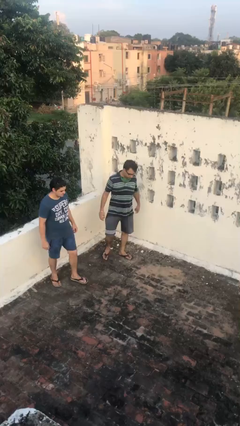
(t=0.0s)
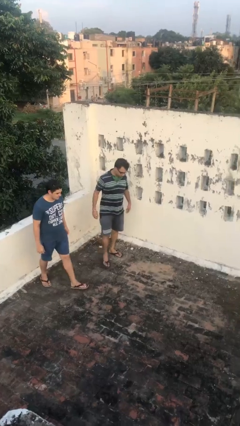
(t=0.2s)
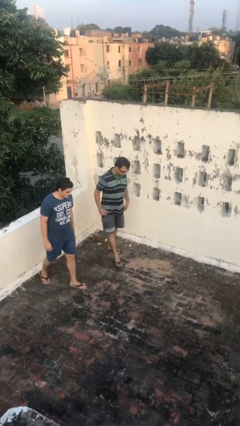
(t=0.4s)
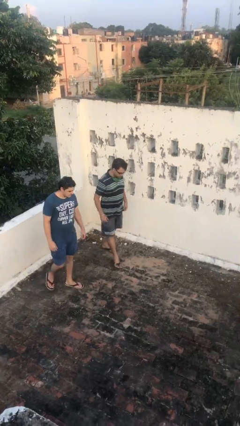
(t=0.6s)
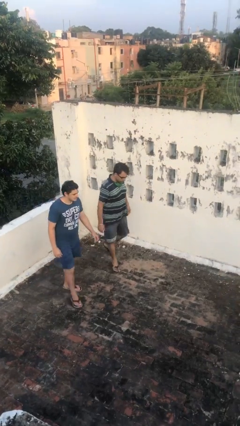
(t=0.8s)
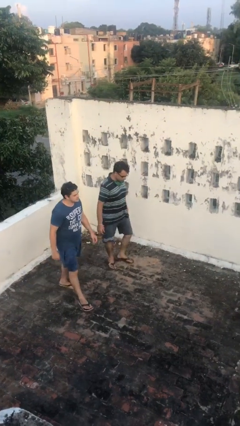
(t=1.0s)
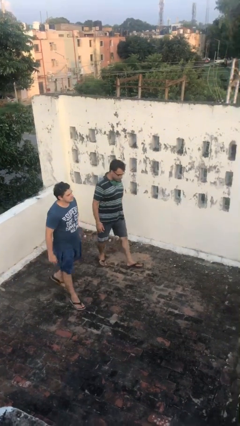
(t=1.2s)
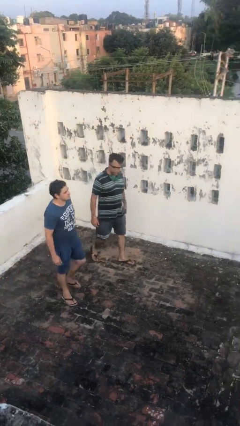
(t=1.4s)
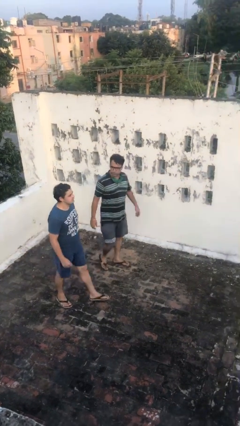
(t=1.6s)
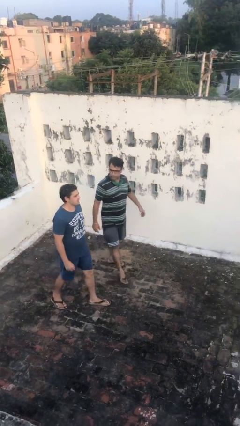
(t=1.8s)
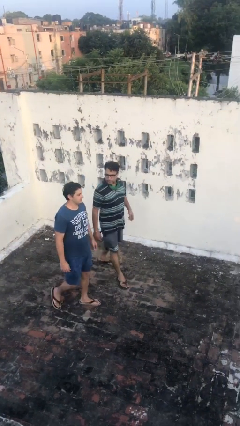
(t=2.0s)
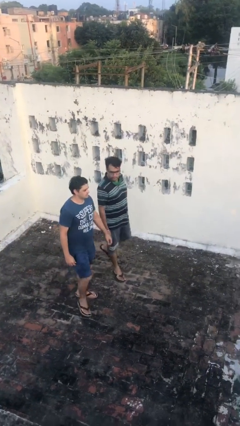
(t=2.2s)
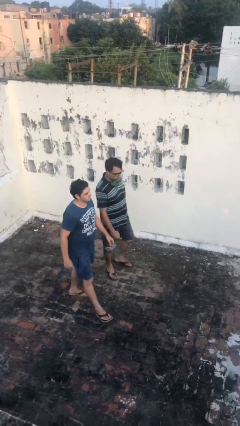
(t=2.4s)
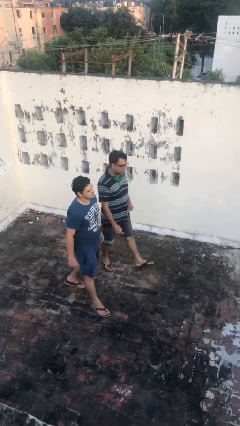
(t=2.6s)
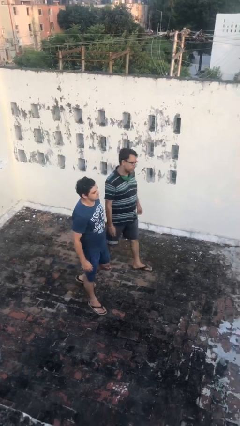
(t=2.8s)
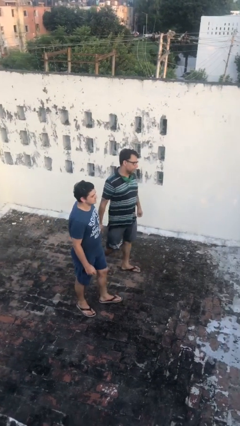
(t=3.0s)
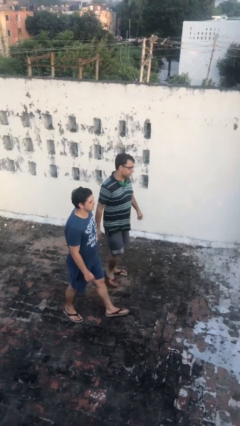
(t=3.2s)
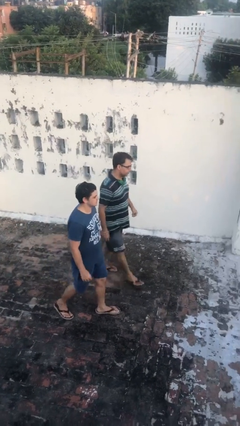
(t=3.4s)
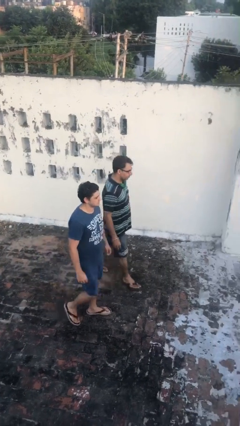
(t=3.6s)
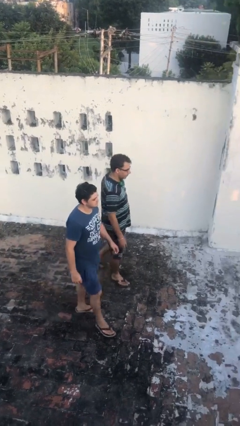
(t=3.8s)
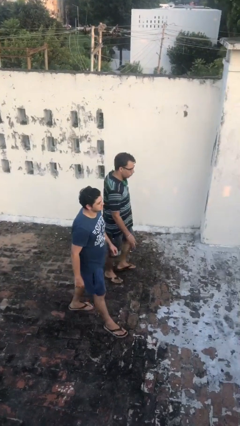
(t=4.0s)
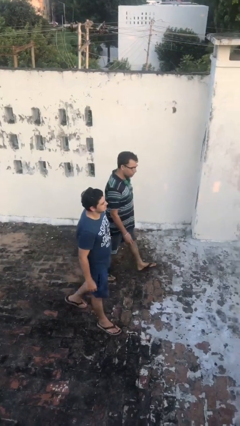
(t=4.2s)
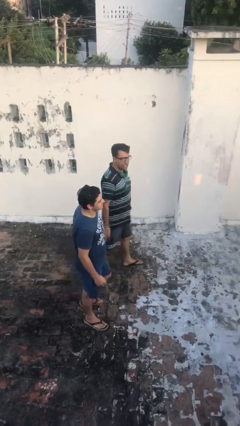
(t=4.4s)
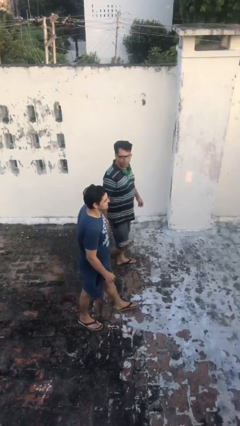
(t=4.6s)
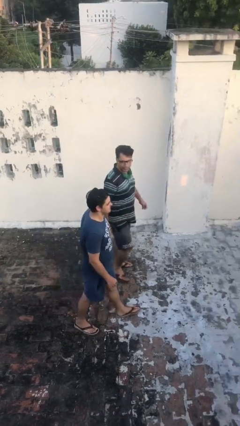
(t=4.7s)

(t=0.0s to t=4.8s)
person talks to person

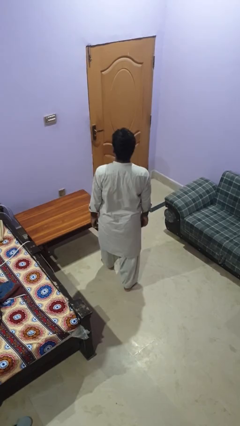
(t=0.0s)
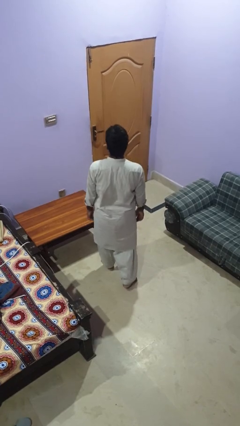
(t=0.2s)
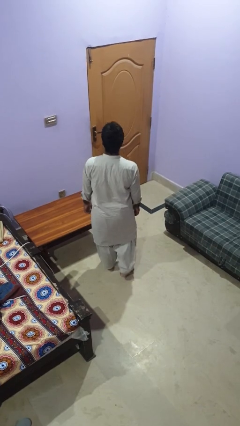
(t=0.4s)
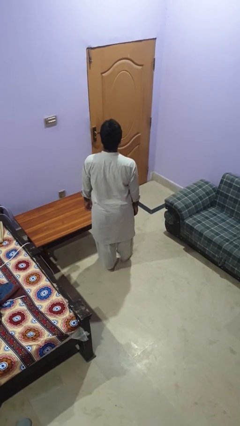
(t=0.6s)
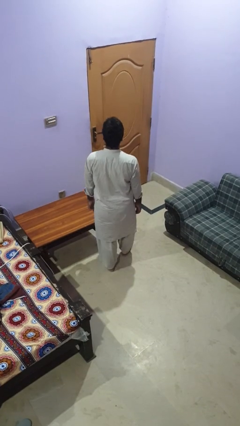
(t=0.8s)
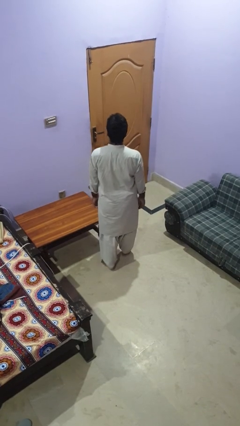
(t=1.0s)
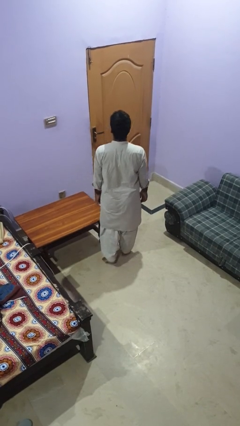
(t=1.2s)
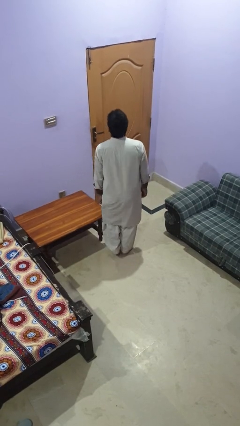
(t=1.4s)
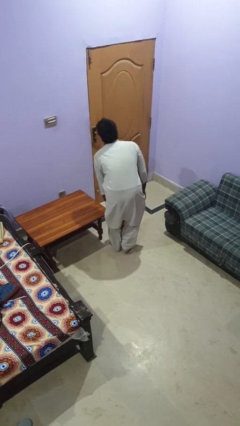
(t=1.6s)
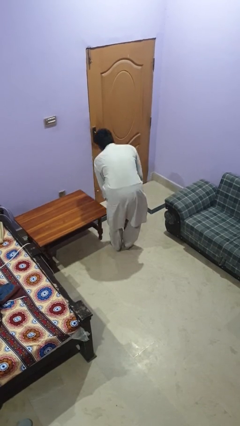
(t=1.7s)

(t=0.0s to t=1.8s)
person bumps into table

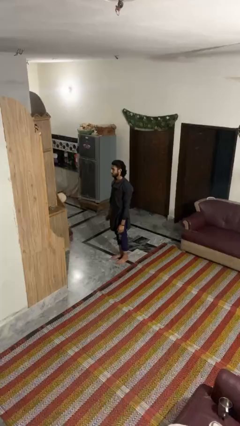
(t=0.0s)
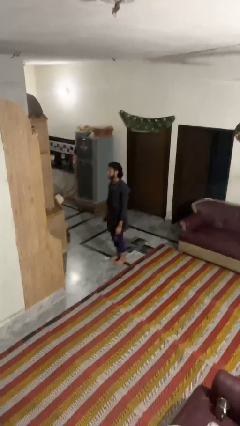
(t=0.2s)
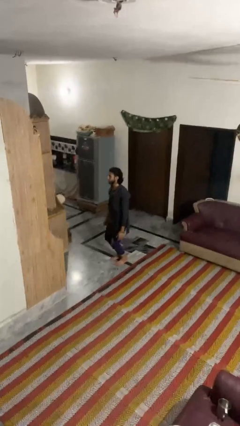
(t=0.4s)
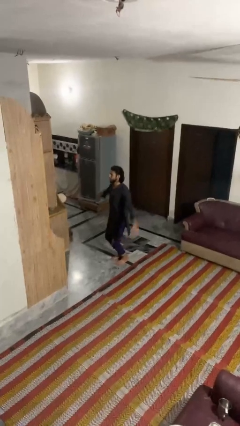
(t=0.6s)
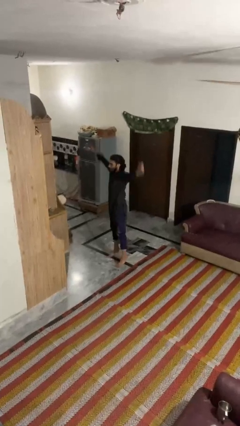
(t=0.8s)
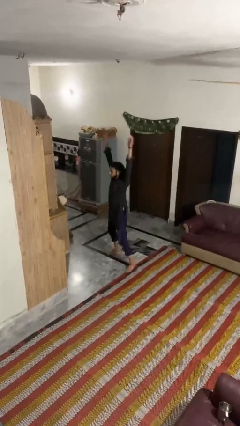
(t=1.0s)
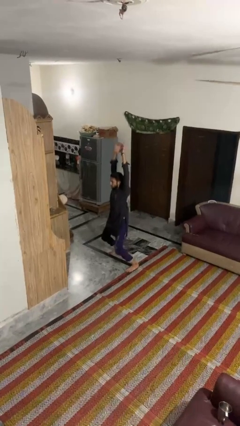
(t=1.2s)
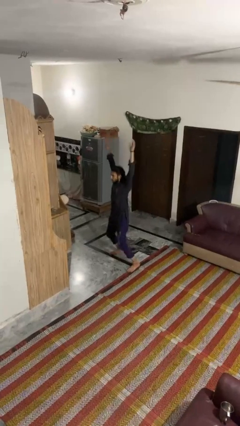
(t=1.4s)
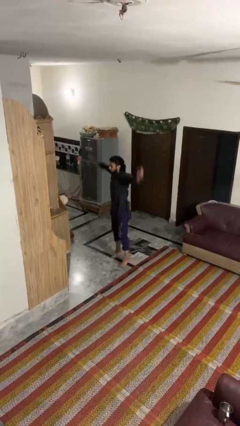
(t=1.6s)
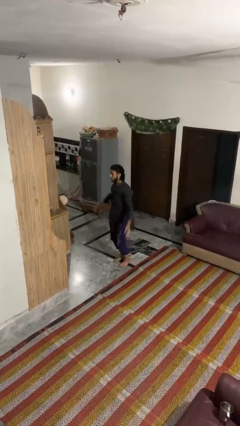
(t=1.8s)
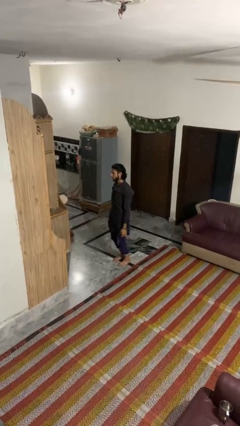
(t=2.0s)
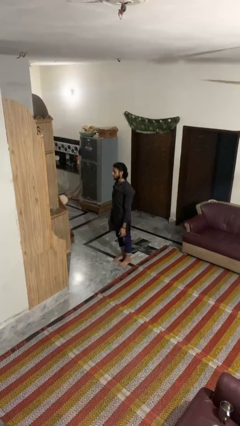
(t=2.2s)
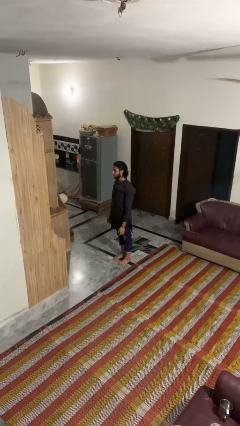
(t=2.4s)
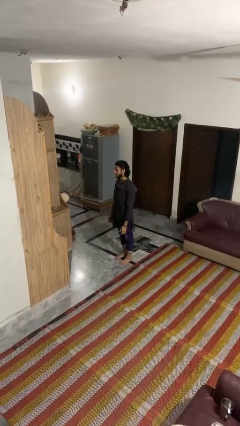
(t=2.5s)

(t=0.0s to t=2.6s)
person exercises with jumping jacks

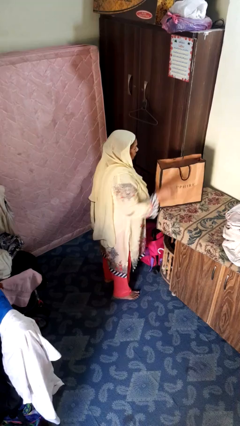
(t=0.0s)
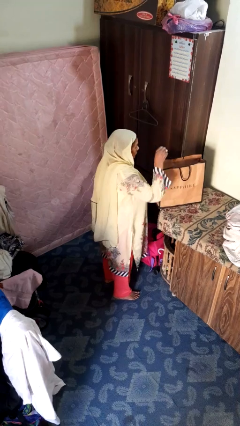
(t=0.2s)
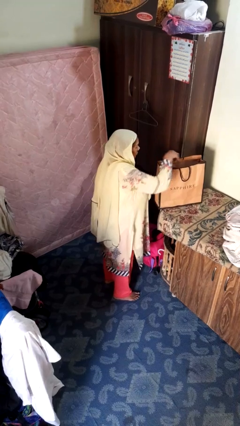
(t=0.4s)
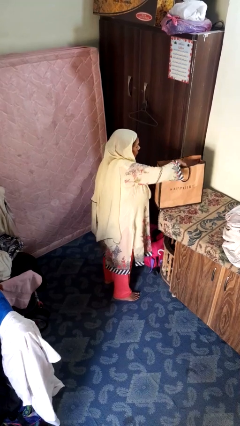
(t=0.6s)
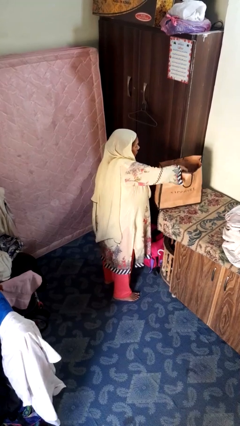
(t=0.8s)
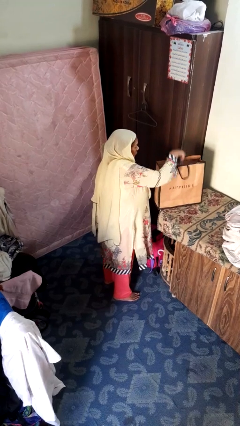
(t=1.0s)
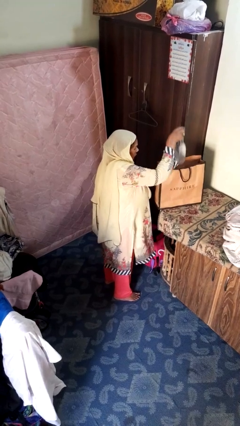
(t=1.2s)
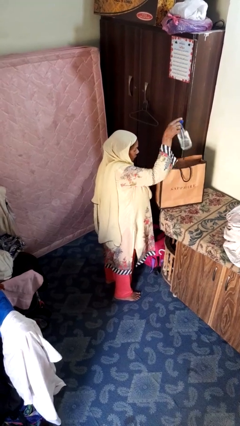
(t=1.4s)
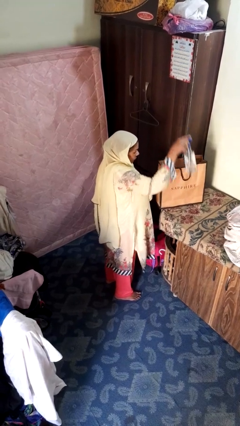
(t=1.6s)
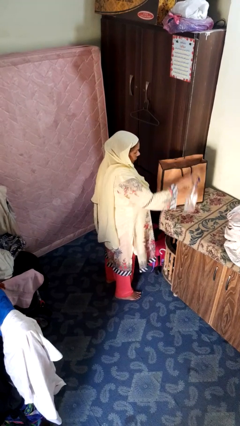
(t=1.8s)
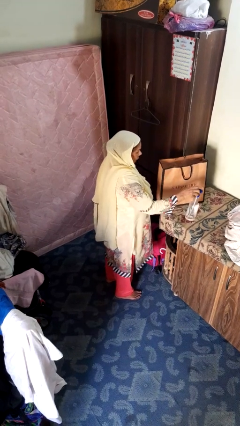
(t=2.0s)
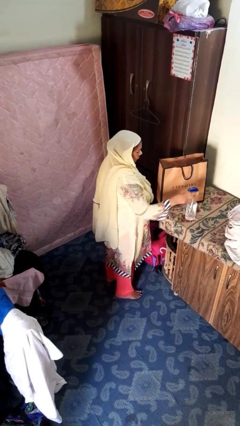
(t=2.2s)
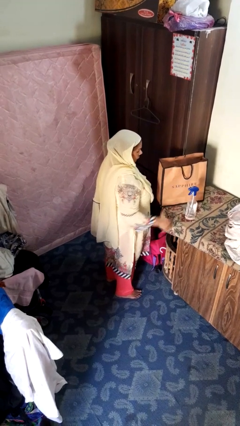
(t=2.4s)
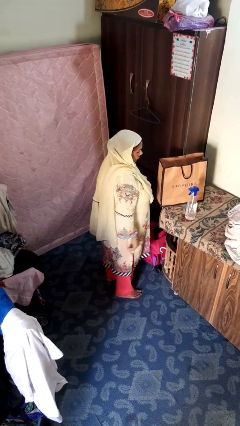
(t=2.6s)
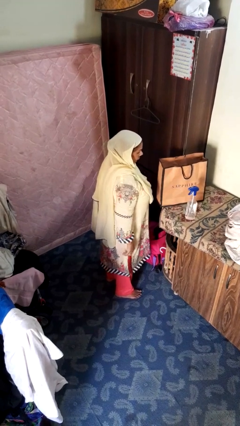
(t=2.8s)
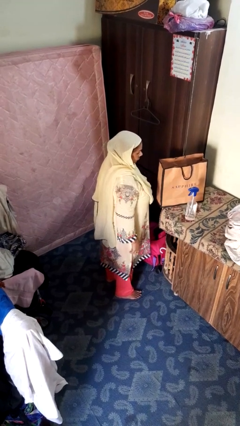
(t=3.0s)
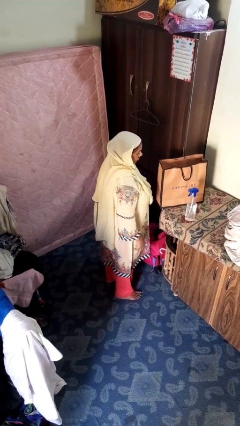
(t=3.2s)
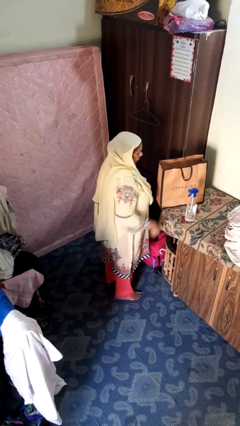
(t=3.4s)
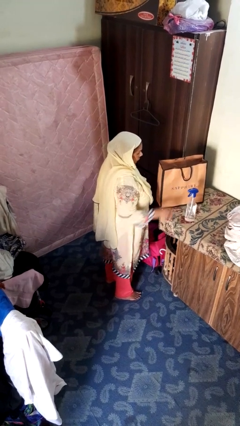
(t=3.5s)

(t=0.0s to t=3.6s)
person takes object from bag

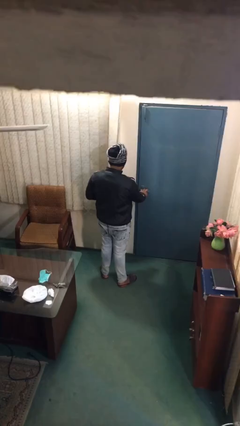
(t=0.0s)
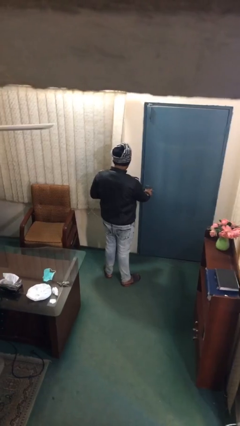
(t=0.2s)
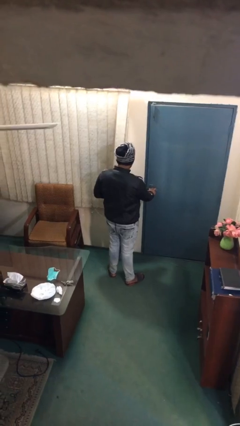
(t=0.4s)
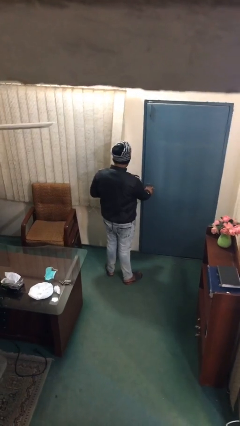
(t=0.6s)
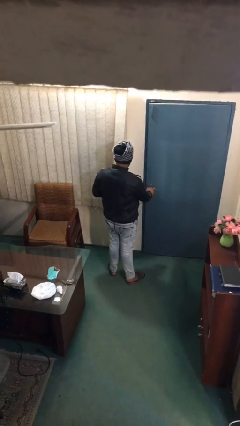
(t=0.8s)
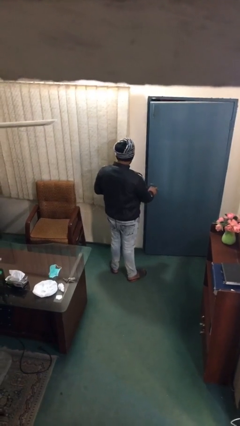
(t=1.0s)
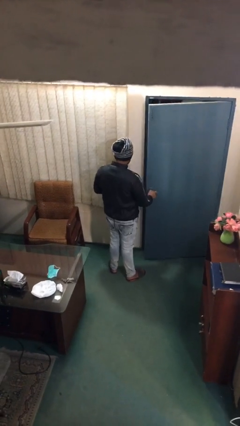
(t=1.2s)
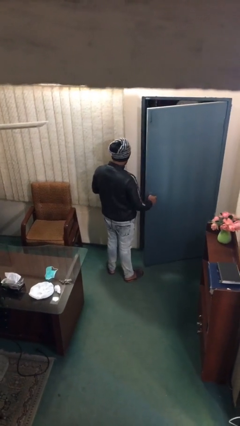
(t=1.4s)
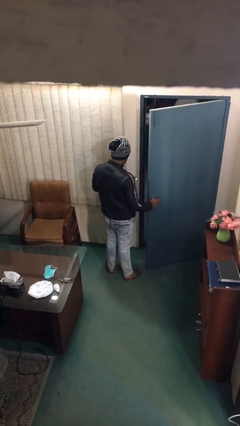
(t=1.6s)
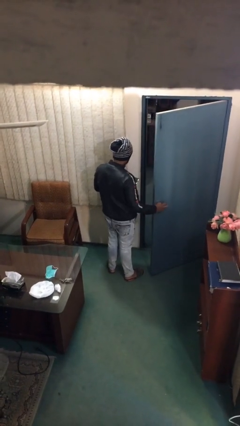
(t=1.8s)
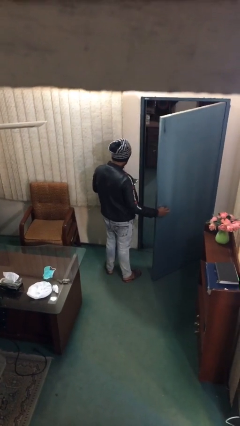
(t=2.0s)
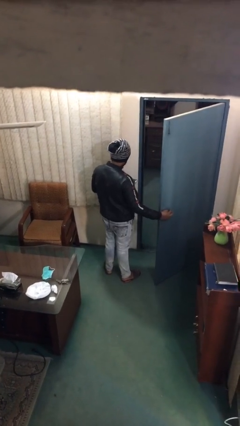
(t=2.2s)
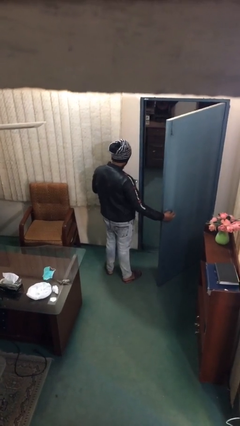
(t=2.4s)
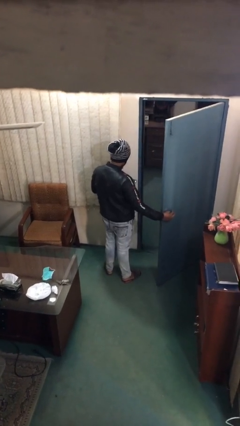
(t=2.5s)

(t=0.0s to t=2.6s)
person opens facility door

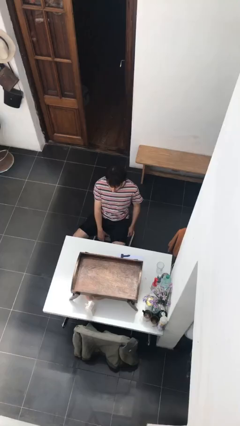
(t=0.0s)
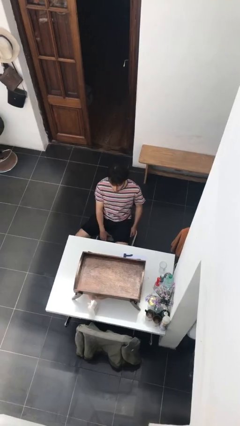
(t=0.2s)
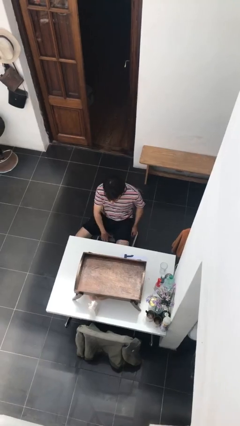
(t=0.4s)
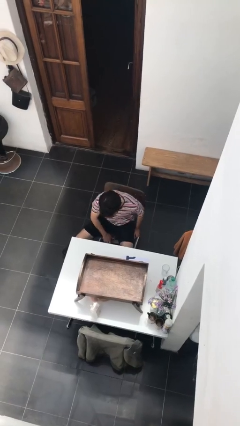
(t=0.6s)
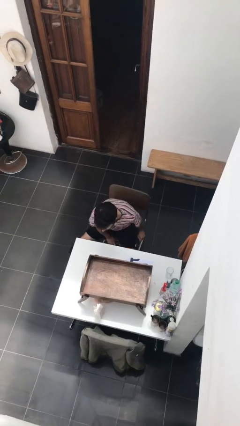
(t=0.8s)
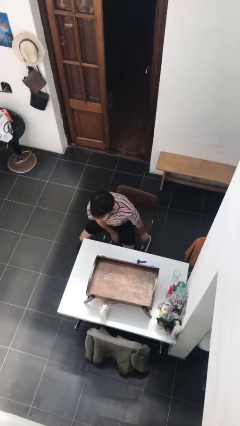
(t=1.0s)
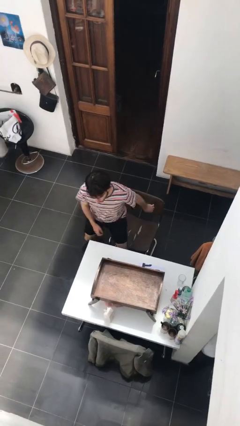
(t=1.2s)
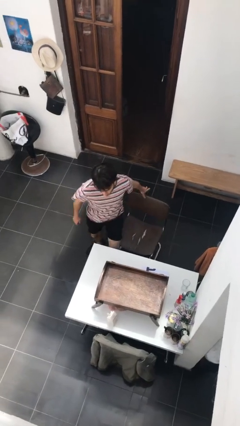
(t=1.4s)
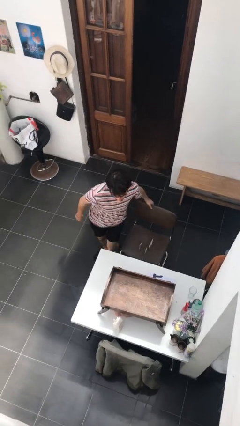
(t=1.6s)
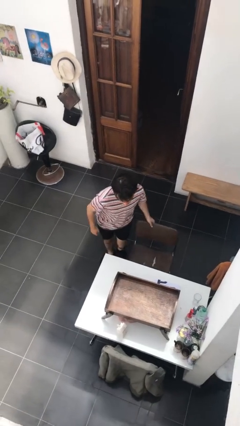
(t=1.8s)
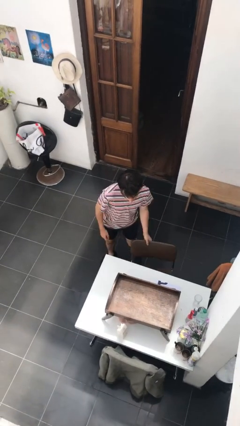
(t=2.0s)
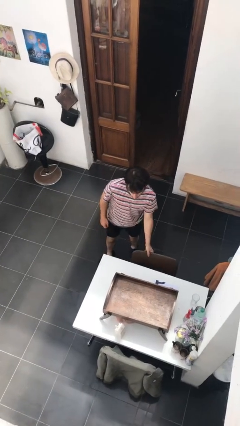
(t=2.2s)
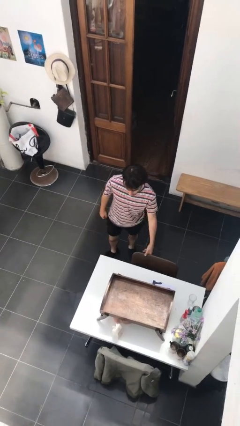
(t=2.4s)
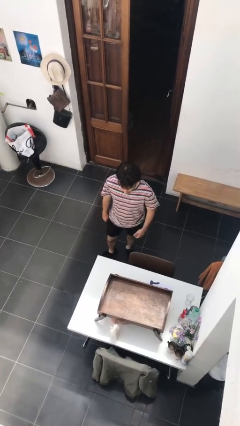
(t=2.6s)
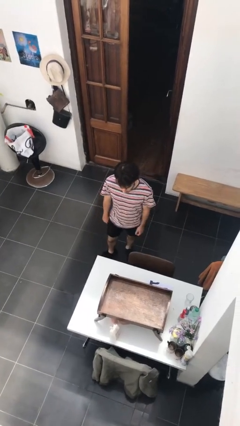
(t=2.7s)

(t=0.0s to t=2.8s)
person stands up
